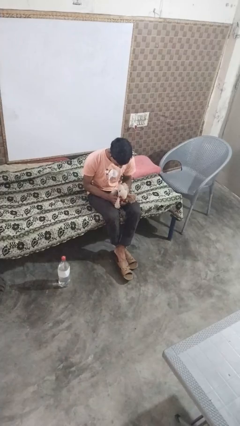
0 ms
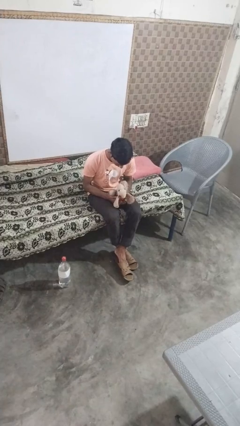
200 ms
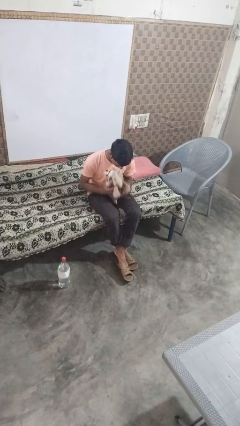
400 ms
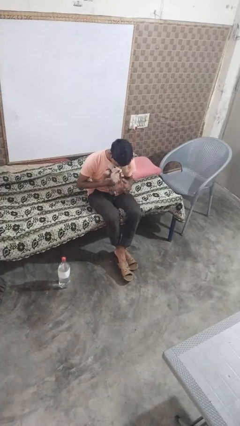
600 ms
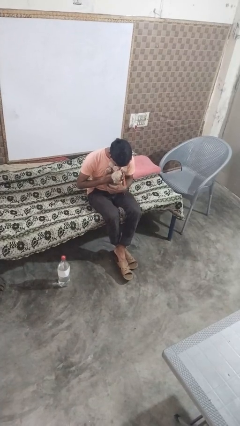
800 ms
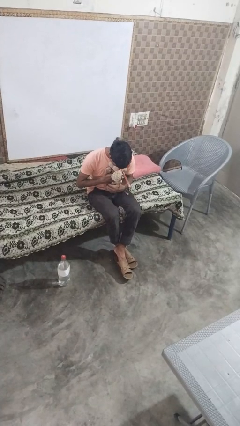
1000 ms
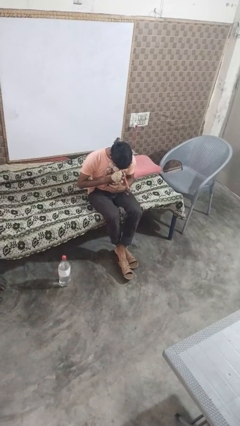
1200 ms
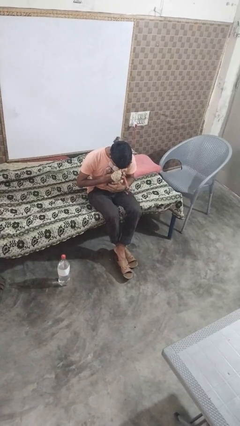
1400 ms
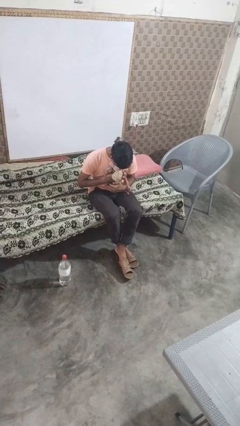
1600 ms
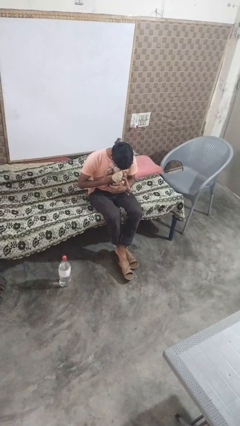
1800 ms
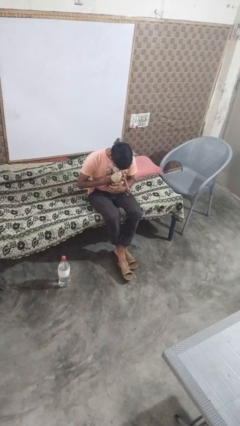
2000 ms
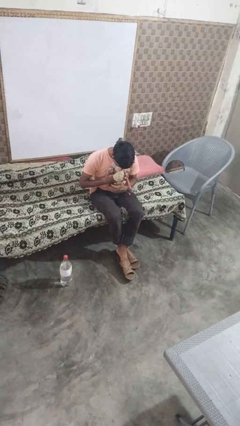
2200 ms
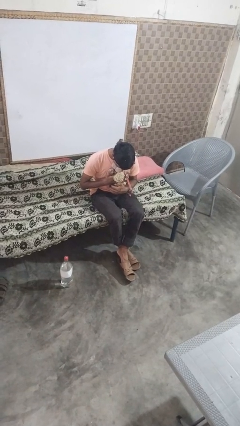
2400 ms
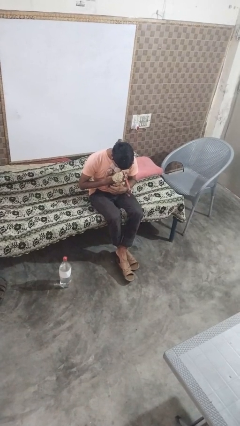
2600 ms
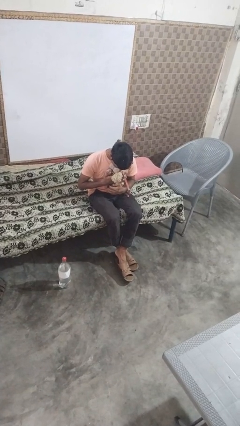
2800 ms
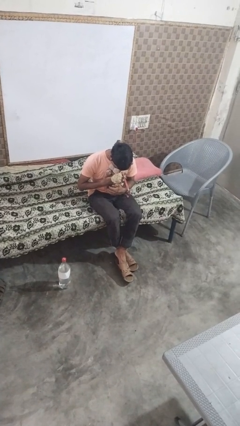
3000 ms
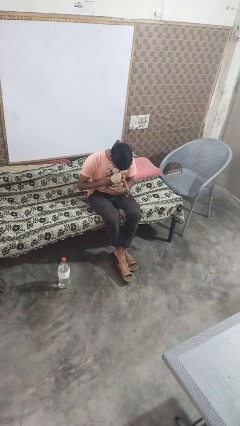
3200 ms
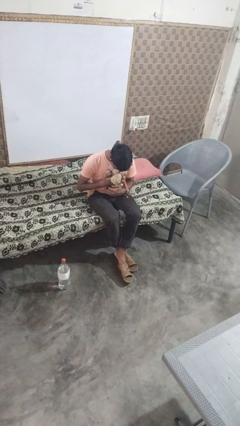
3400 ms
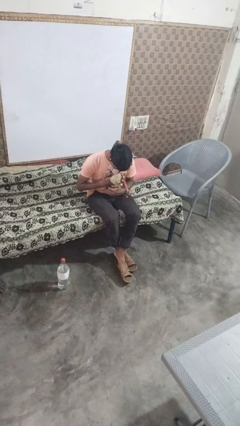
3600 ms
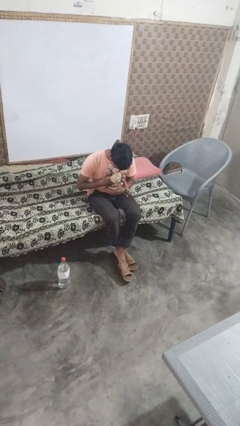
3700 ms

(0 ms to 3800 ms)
person hugs stuffed animal

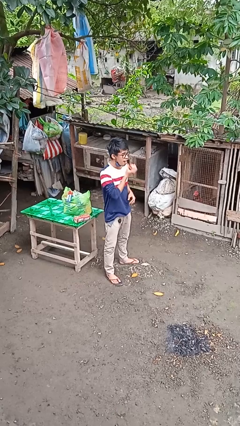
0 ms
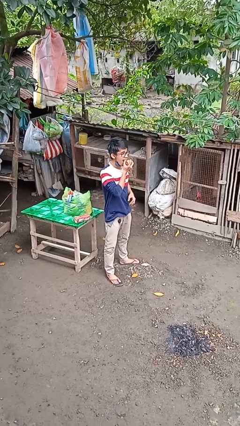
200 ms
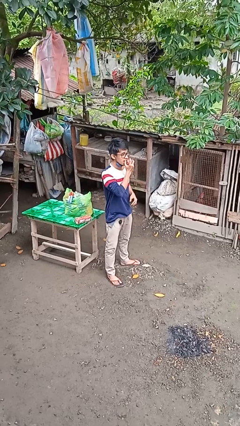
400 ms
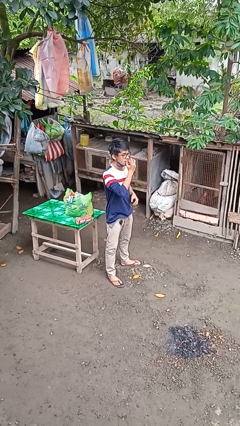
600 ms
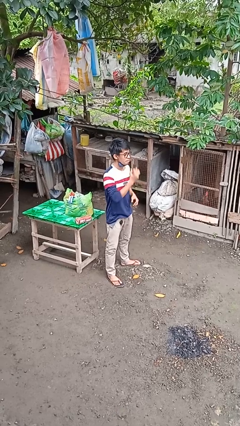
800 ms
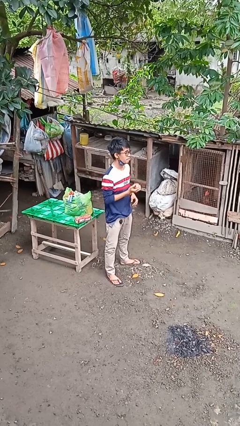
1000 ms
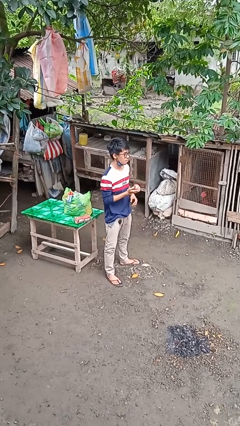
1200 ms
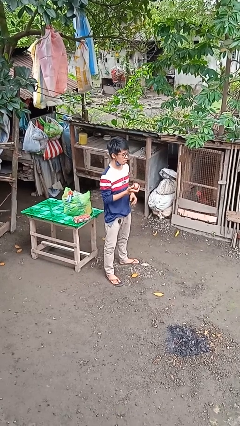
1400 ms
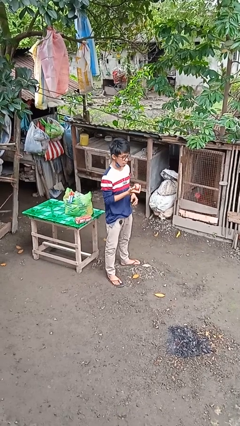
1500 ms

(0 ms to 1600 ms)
person eats apple

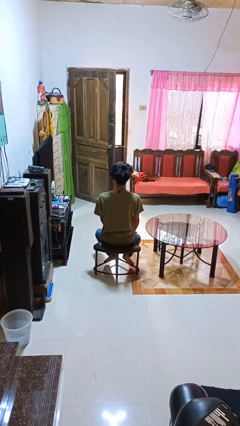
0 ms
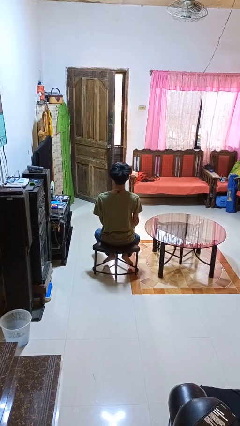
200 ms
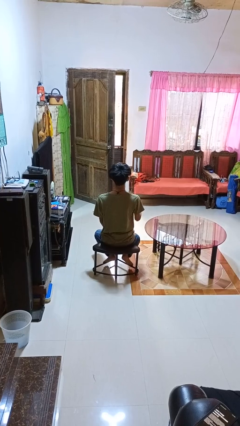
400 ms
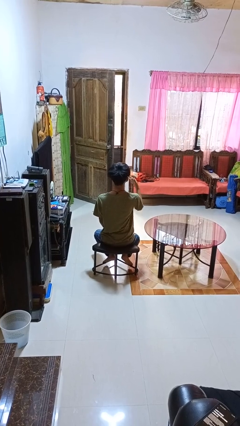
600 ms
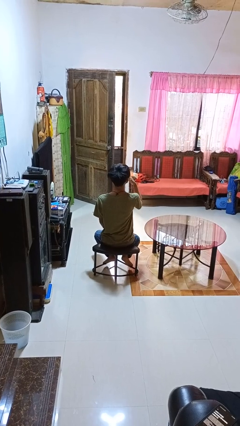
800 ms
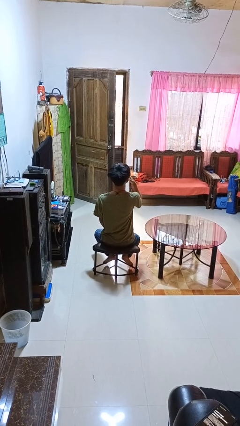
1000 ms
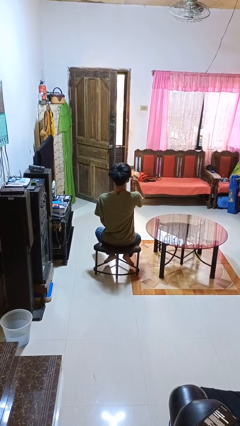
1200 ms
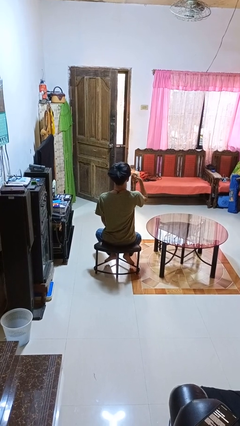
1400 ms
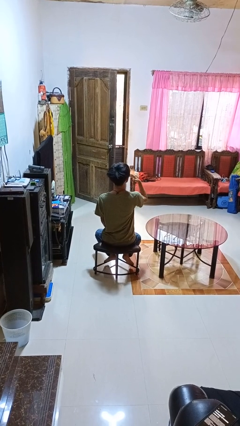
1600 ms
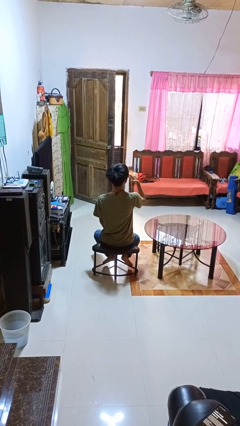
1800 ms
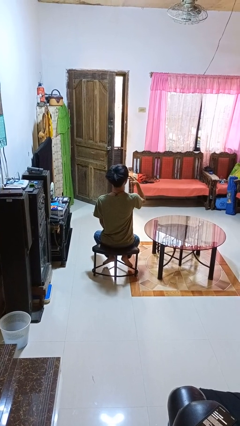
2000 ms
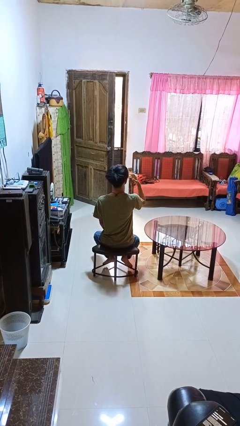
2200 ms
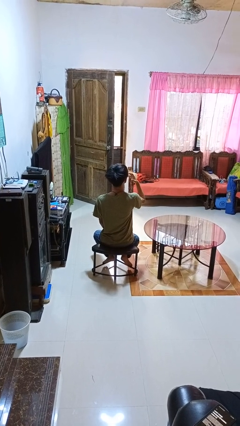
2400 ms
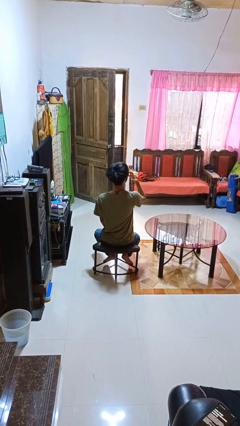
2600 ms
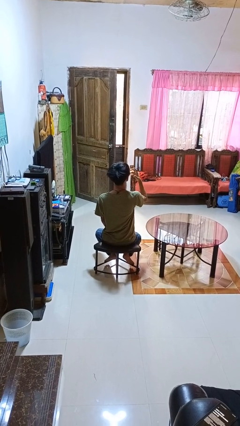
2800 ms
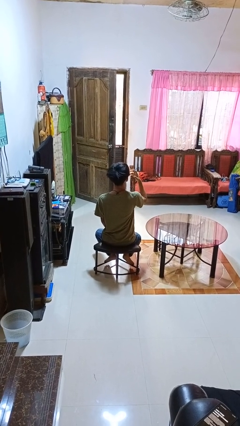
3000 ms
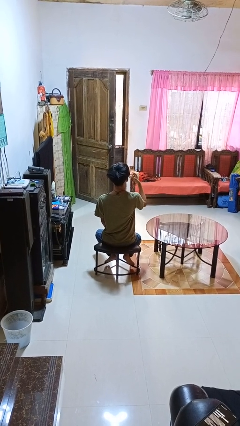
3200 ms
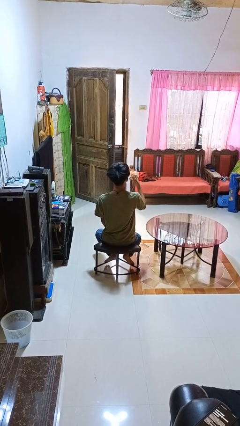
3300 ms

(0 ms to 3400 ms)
person licks fingers

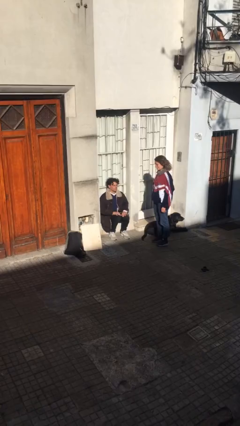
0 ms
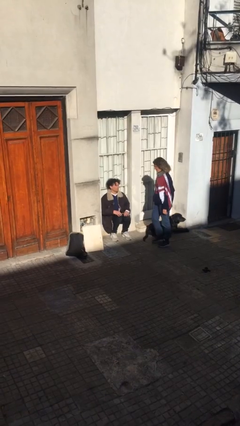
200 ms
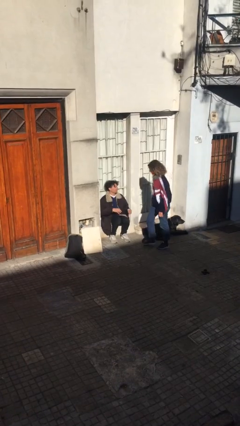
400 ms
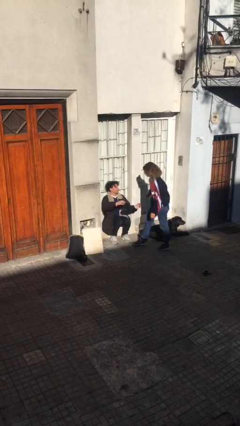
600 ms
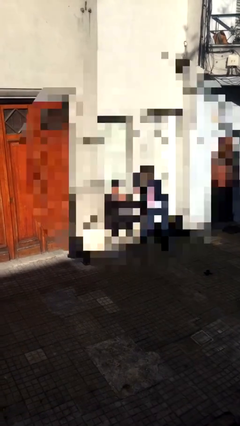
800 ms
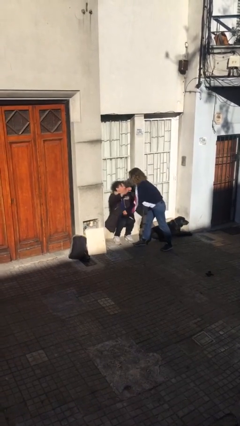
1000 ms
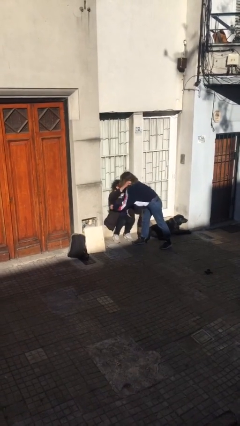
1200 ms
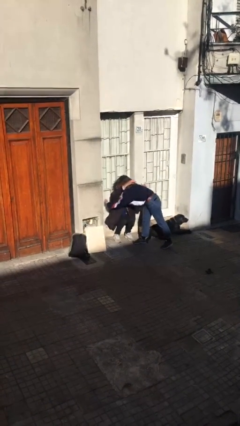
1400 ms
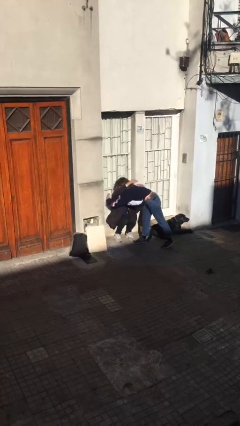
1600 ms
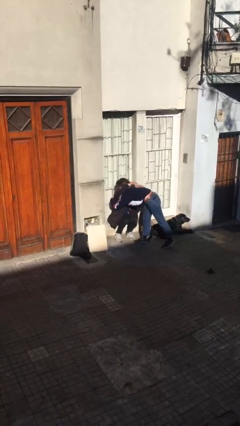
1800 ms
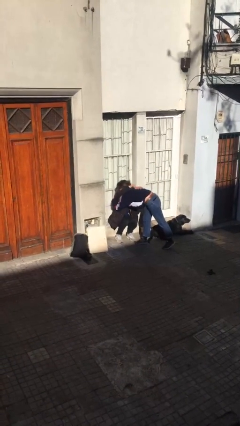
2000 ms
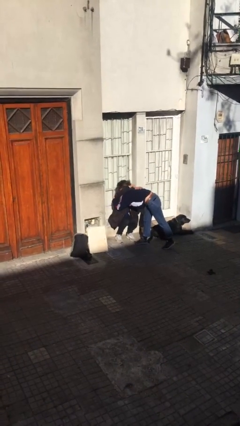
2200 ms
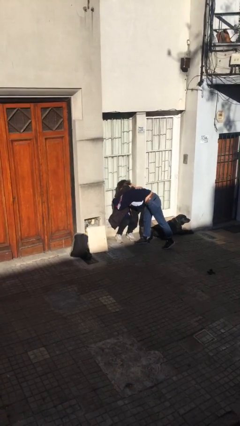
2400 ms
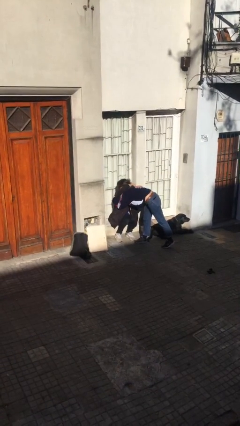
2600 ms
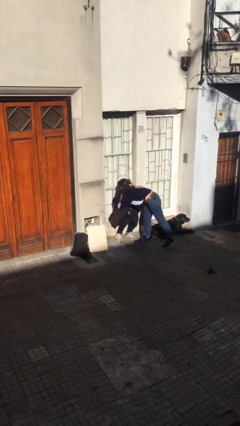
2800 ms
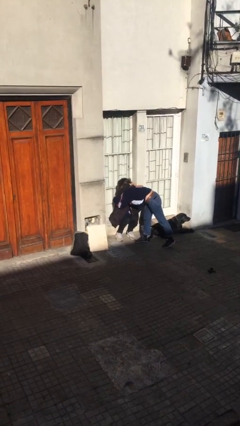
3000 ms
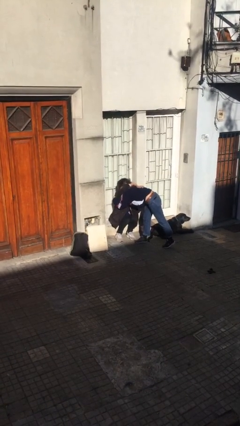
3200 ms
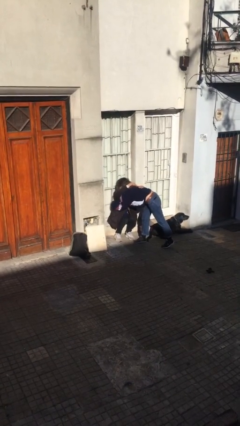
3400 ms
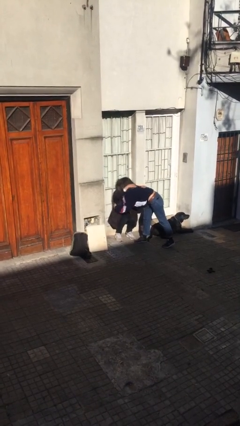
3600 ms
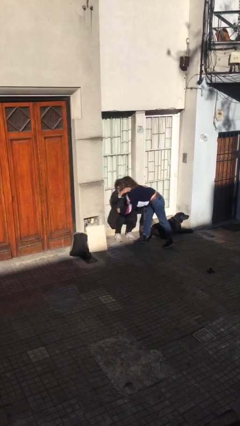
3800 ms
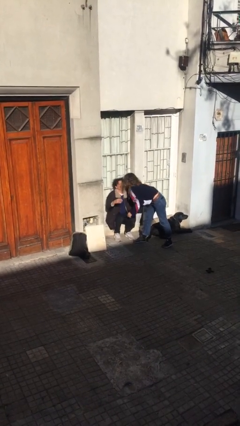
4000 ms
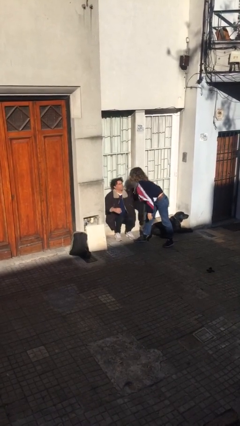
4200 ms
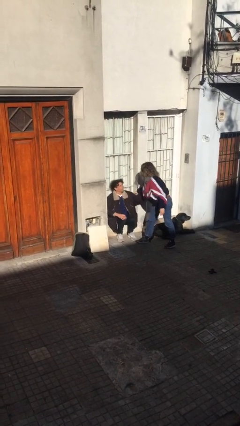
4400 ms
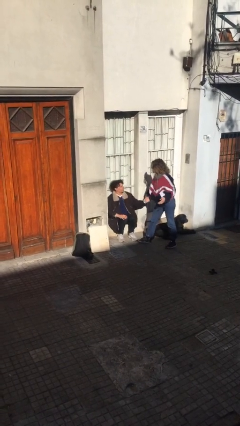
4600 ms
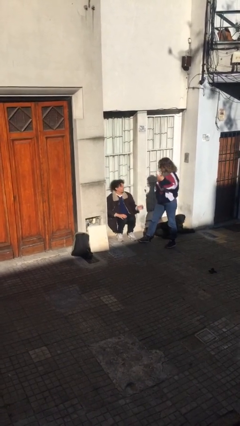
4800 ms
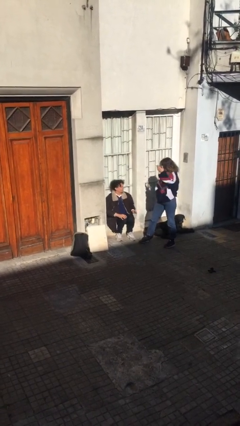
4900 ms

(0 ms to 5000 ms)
person embraces person

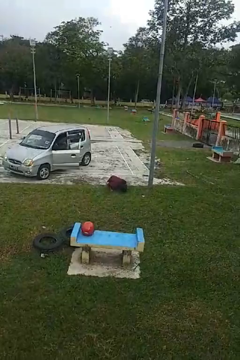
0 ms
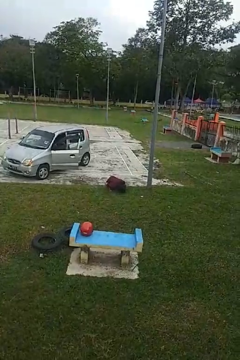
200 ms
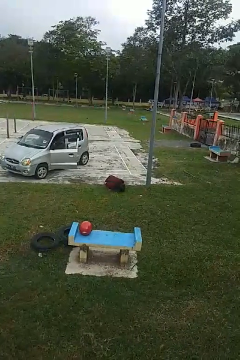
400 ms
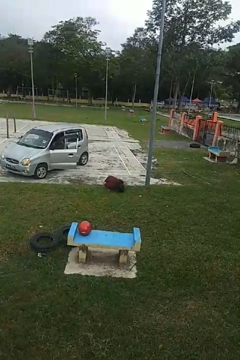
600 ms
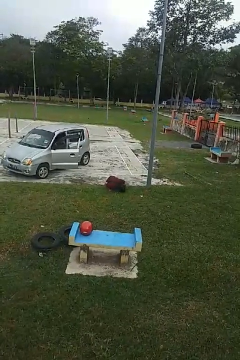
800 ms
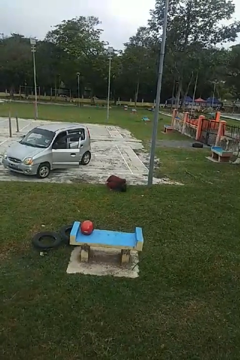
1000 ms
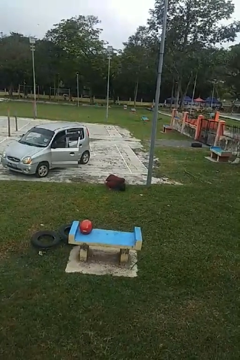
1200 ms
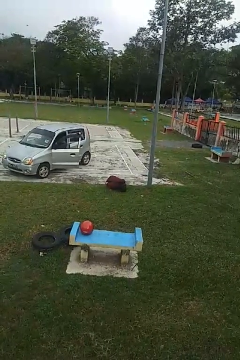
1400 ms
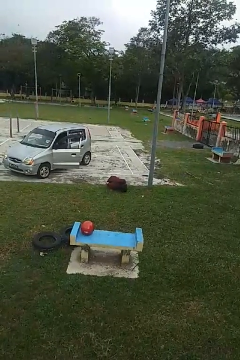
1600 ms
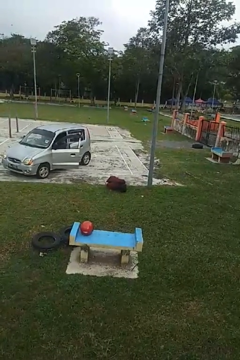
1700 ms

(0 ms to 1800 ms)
person lies down on floor

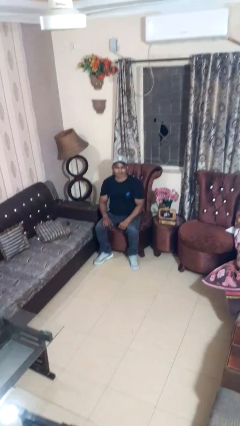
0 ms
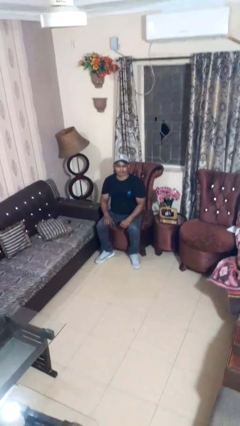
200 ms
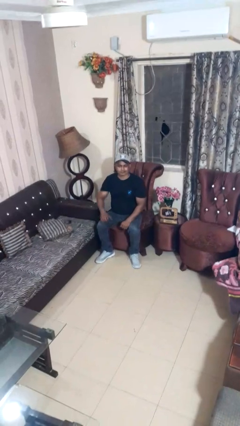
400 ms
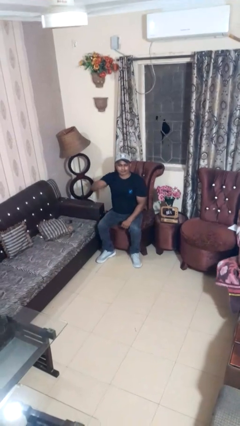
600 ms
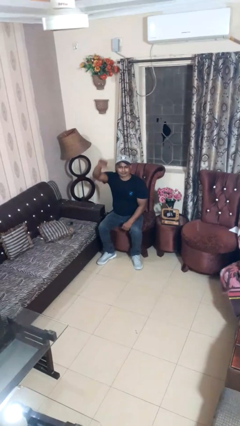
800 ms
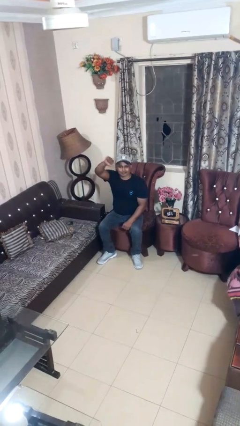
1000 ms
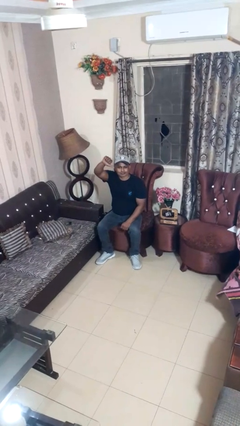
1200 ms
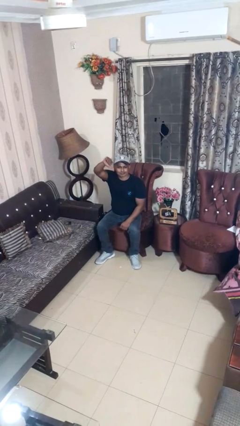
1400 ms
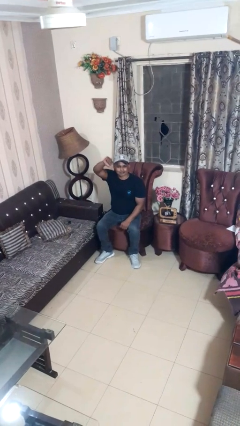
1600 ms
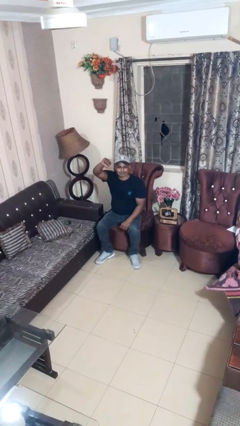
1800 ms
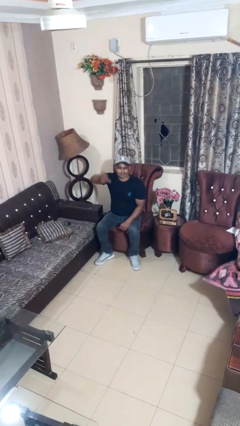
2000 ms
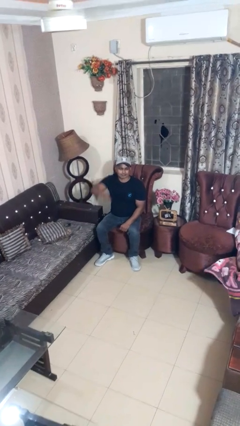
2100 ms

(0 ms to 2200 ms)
person gestures thumbs down
